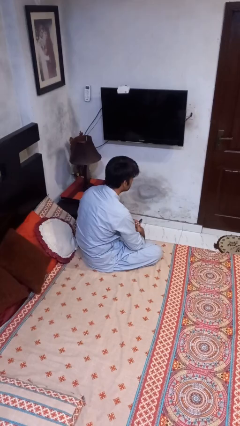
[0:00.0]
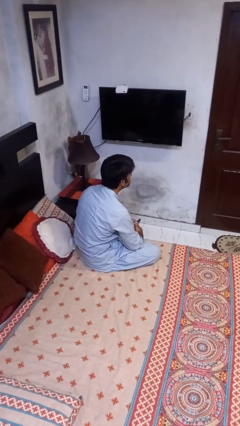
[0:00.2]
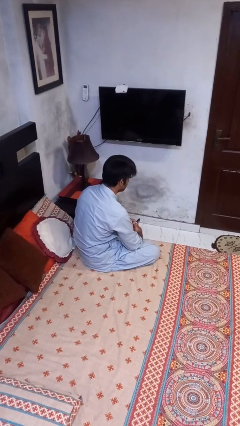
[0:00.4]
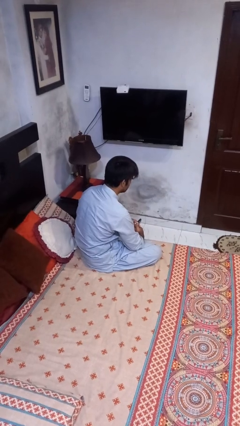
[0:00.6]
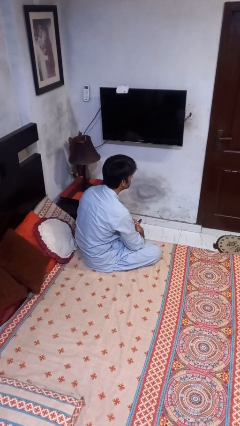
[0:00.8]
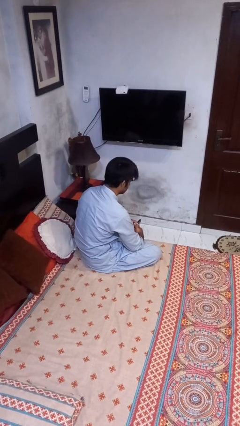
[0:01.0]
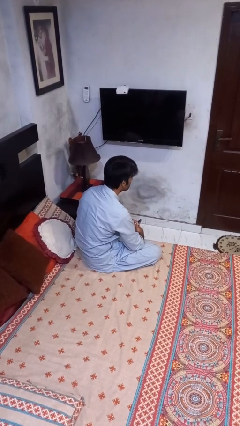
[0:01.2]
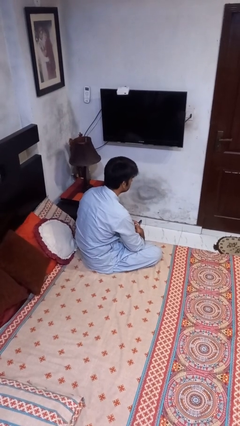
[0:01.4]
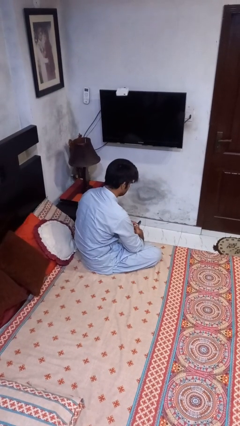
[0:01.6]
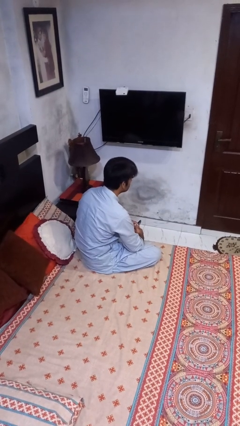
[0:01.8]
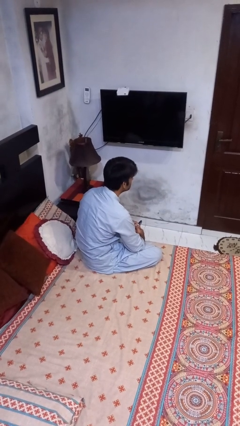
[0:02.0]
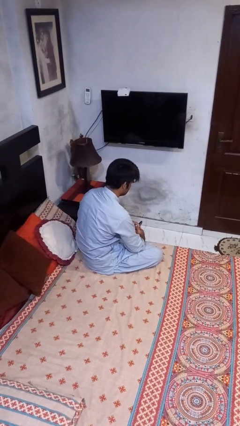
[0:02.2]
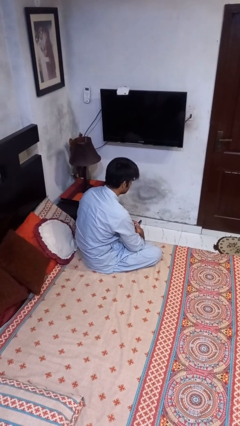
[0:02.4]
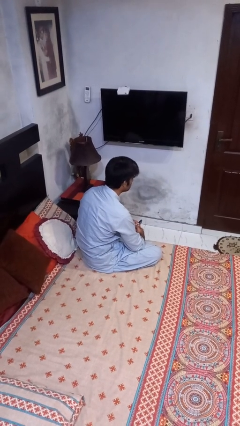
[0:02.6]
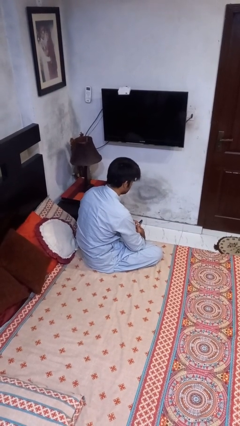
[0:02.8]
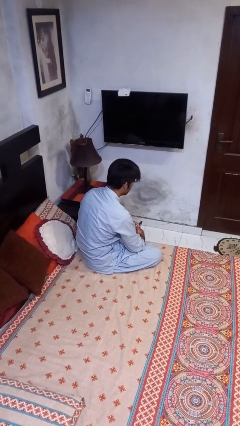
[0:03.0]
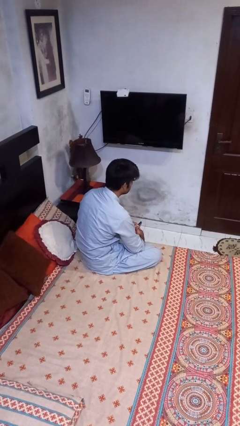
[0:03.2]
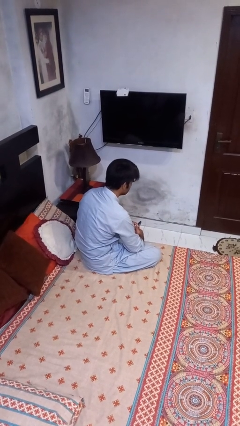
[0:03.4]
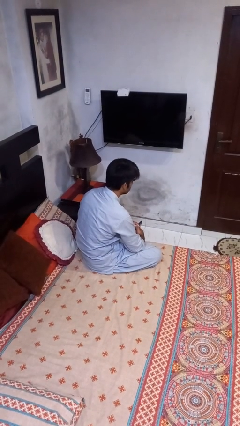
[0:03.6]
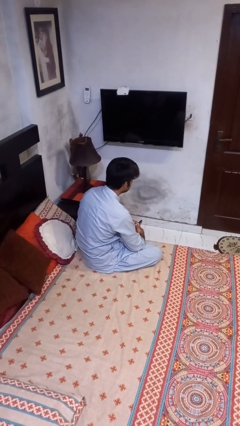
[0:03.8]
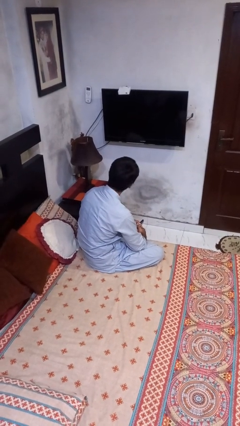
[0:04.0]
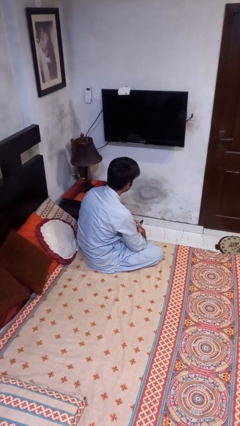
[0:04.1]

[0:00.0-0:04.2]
person nods head

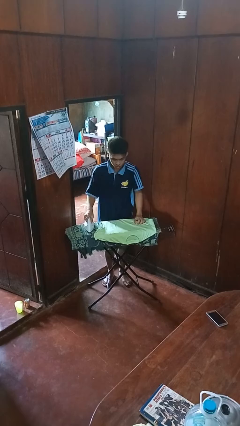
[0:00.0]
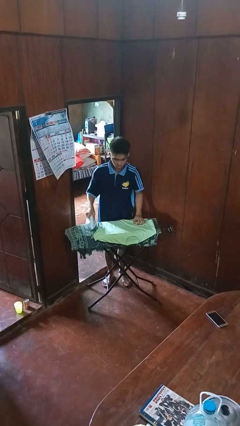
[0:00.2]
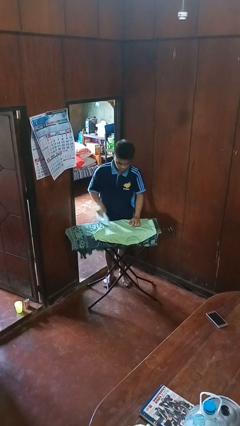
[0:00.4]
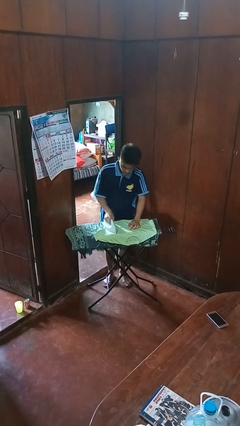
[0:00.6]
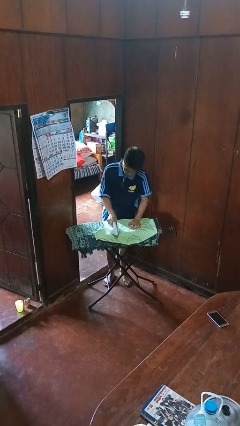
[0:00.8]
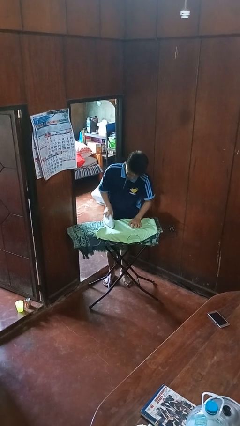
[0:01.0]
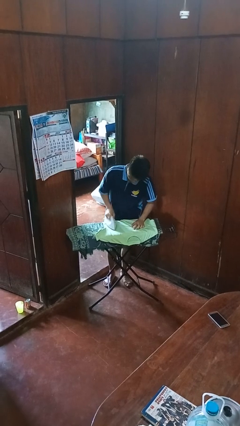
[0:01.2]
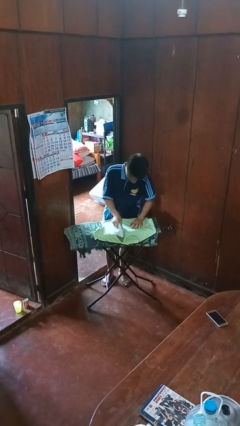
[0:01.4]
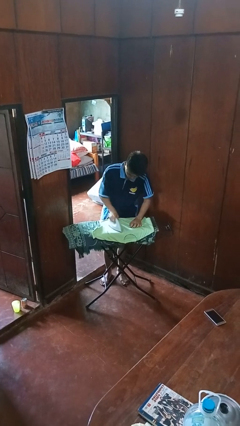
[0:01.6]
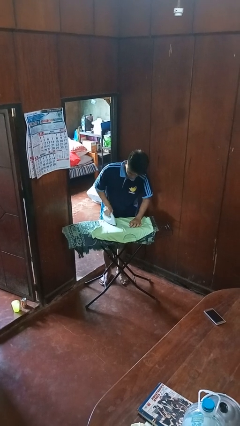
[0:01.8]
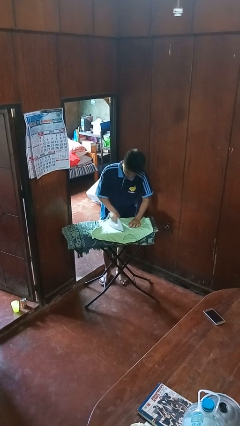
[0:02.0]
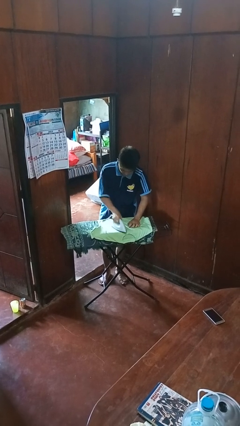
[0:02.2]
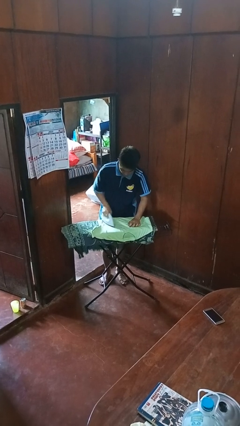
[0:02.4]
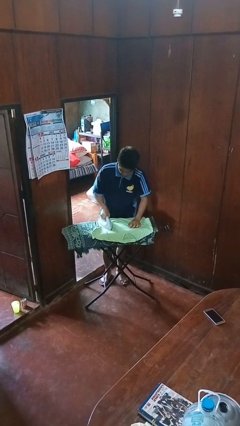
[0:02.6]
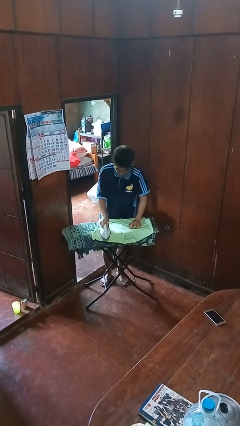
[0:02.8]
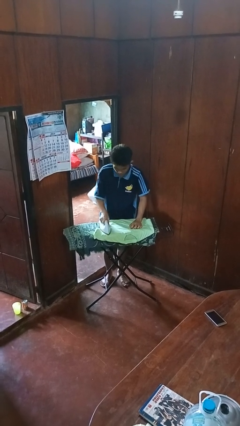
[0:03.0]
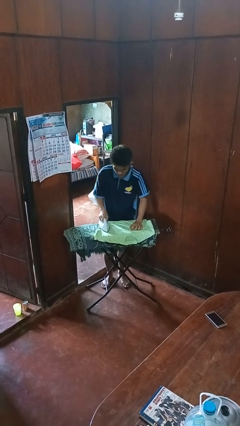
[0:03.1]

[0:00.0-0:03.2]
person irons clothes

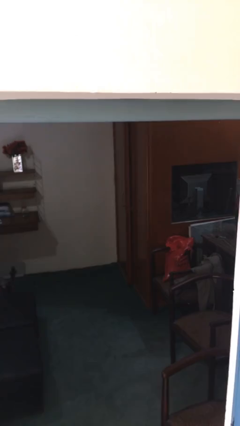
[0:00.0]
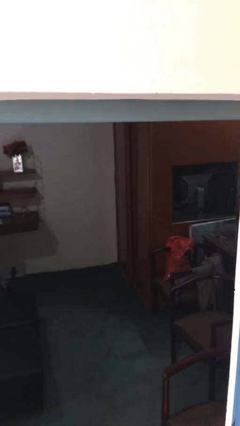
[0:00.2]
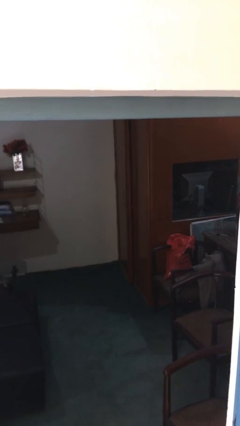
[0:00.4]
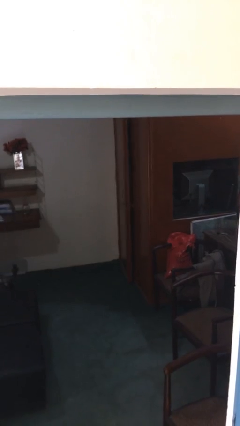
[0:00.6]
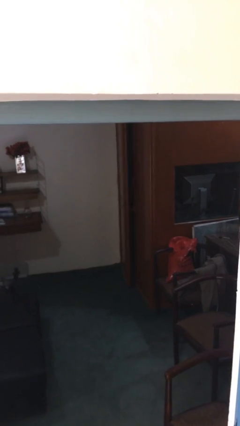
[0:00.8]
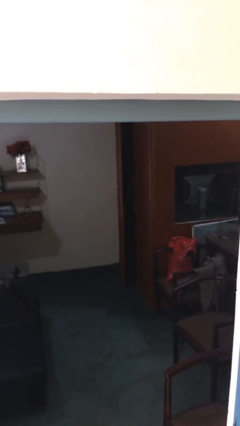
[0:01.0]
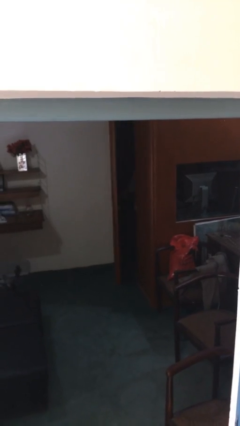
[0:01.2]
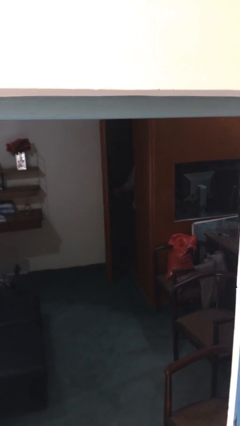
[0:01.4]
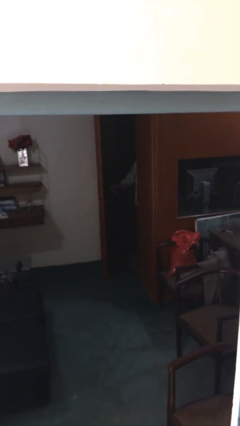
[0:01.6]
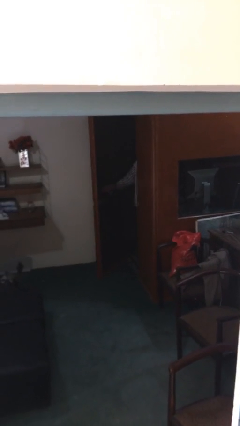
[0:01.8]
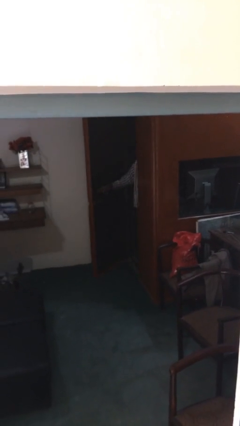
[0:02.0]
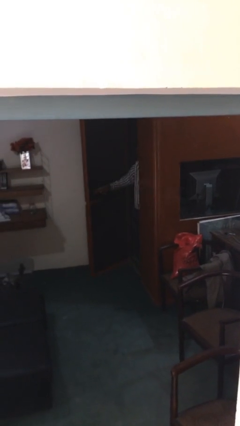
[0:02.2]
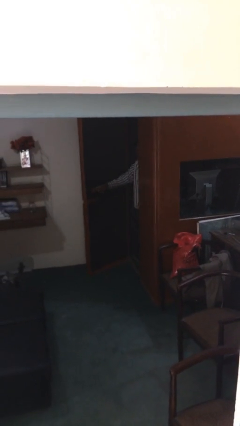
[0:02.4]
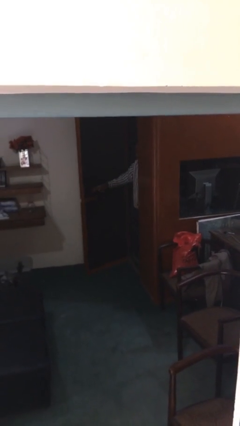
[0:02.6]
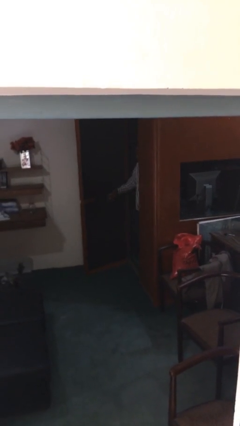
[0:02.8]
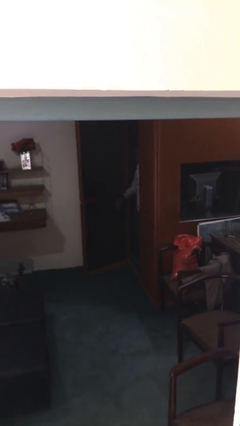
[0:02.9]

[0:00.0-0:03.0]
person opens facility door

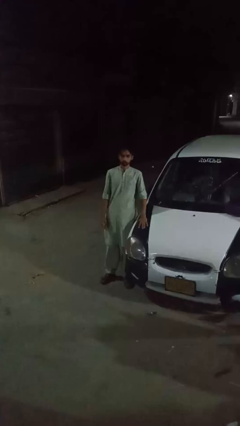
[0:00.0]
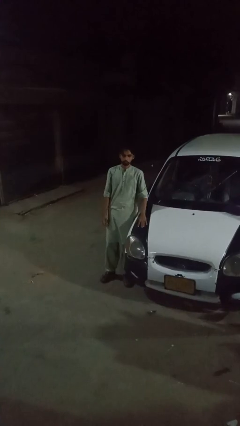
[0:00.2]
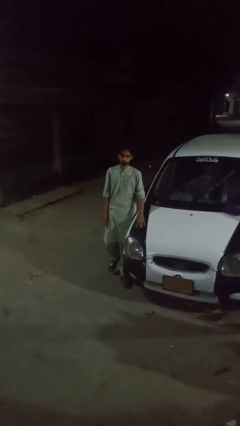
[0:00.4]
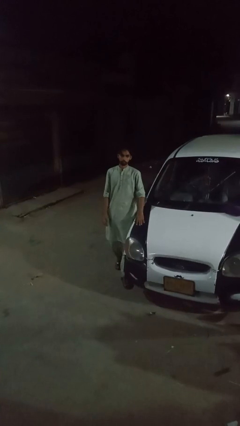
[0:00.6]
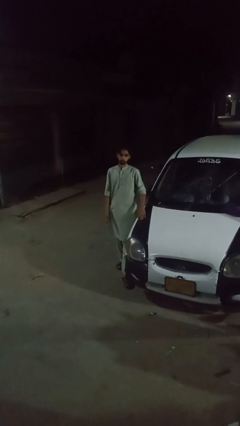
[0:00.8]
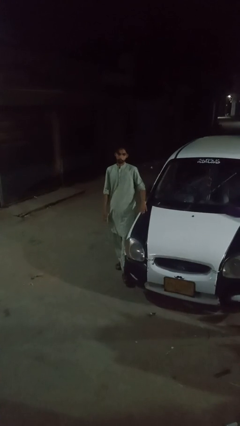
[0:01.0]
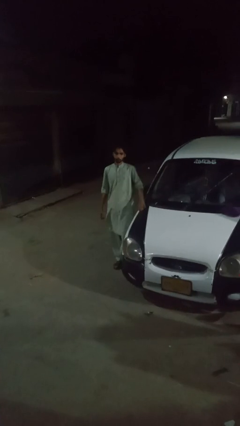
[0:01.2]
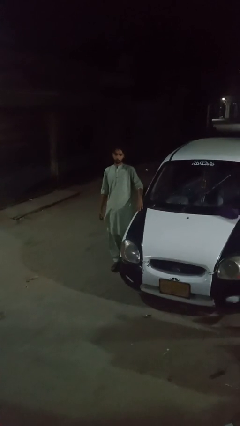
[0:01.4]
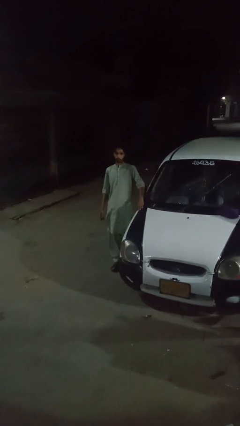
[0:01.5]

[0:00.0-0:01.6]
person walks around car

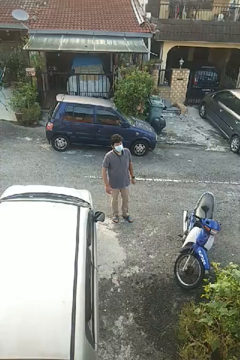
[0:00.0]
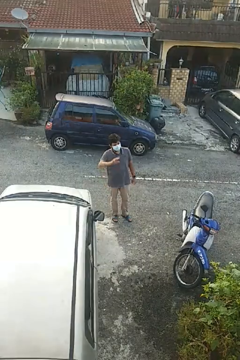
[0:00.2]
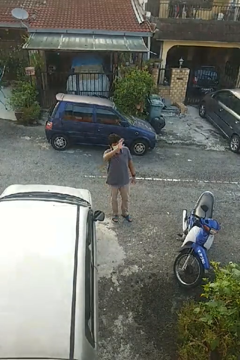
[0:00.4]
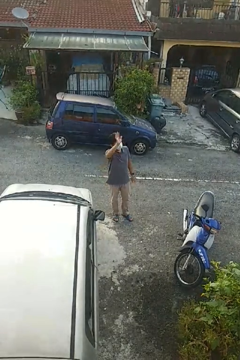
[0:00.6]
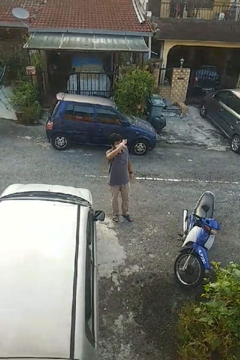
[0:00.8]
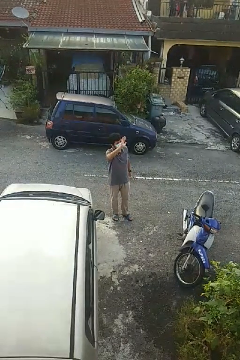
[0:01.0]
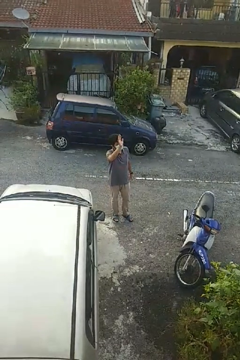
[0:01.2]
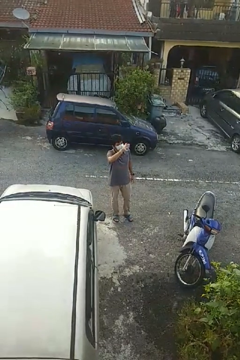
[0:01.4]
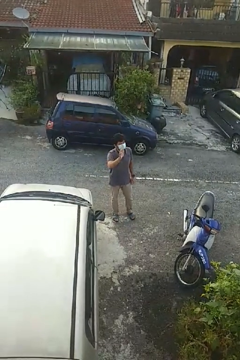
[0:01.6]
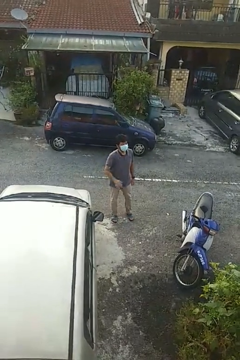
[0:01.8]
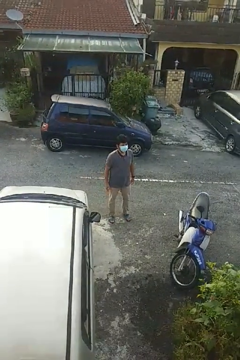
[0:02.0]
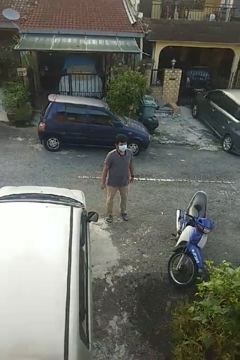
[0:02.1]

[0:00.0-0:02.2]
person waves at person

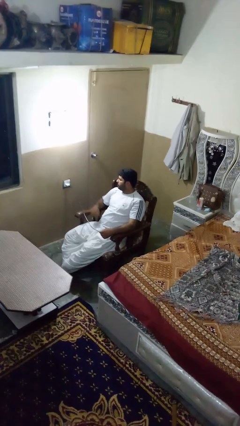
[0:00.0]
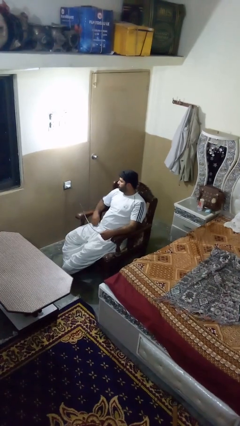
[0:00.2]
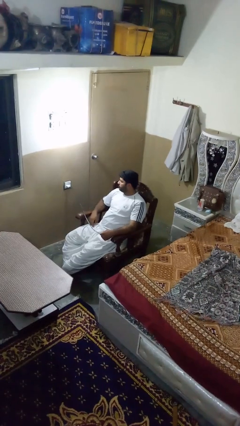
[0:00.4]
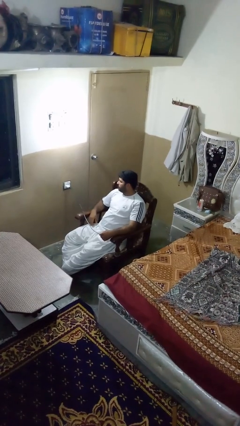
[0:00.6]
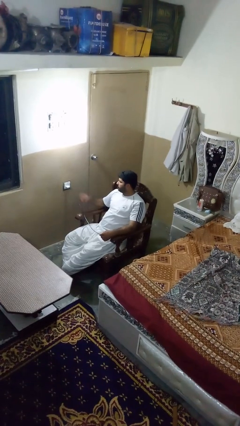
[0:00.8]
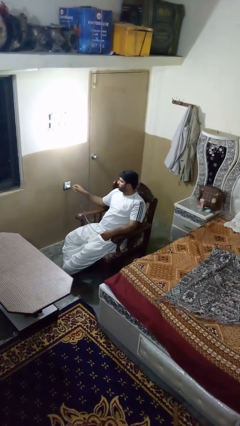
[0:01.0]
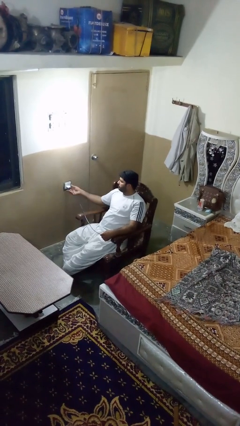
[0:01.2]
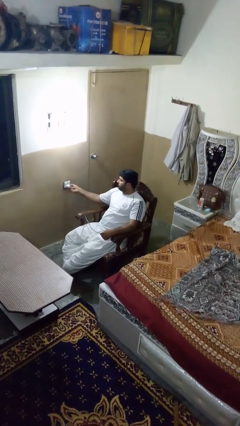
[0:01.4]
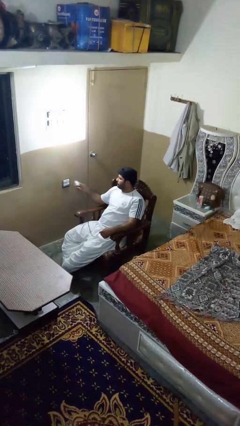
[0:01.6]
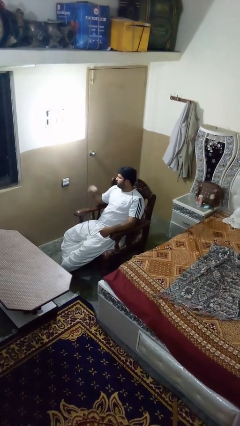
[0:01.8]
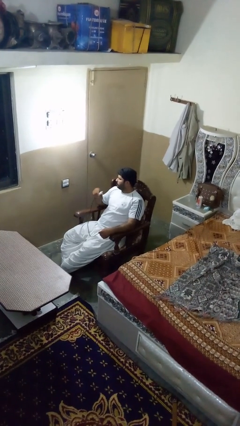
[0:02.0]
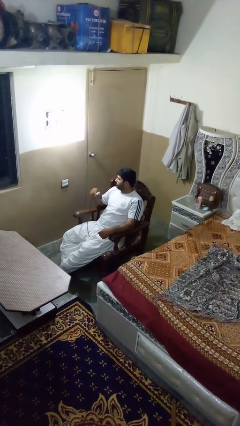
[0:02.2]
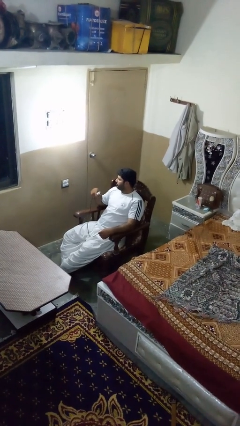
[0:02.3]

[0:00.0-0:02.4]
person unplugs from electrical socket

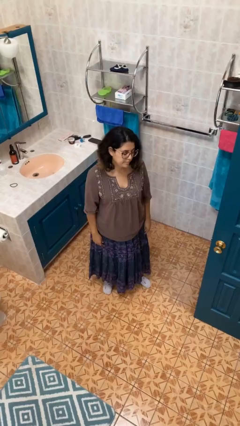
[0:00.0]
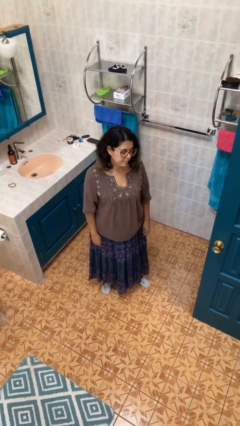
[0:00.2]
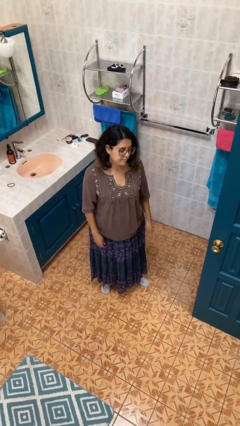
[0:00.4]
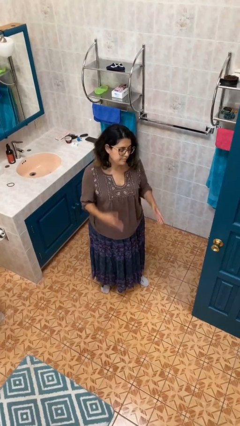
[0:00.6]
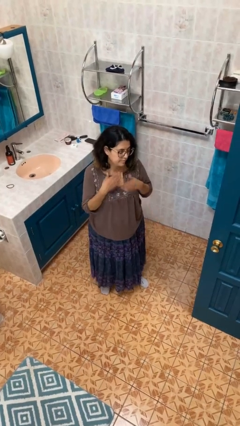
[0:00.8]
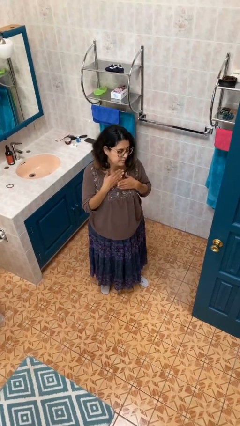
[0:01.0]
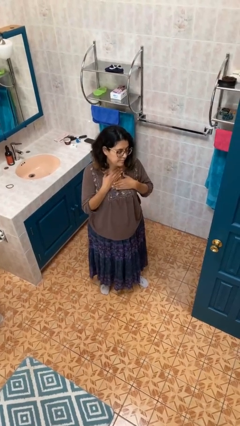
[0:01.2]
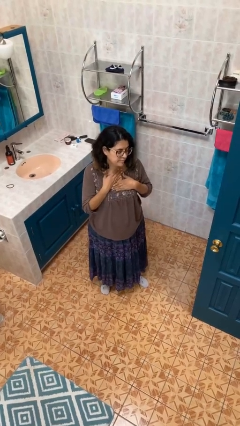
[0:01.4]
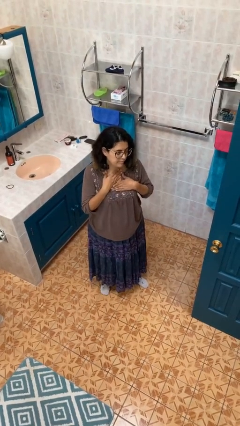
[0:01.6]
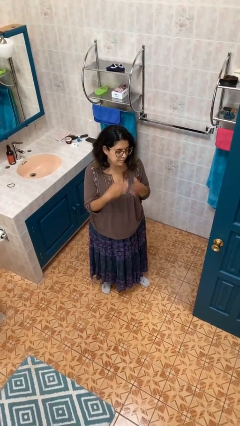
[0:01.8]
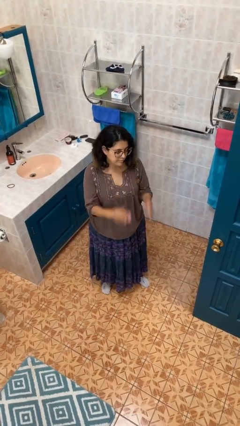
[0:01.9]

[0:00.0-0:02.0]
person drums on chest
